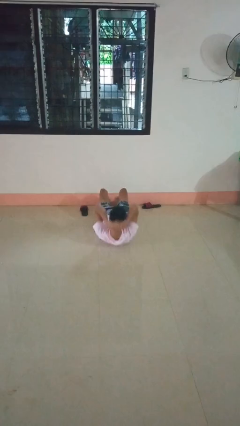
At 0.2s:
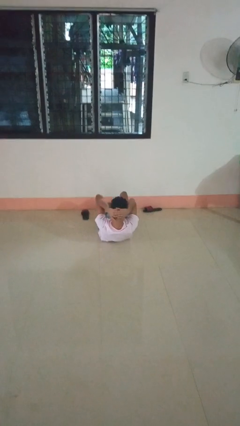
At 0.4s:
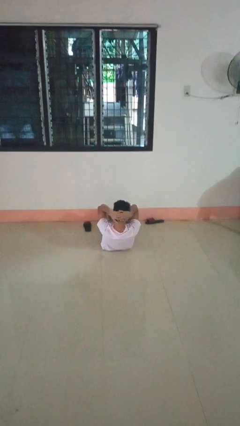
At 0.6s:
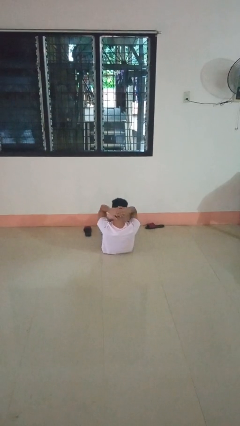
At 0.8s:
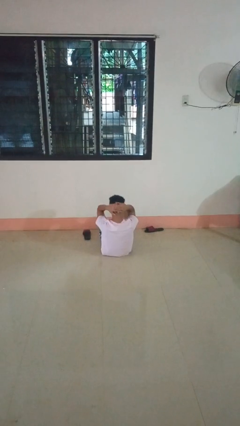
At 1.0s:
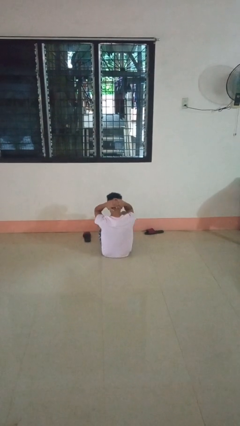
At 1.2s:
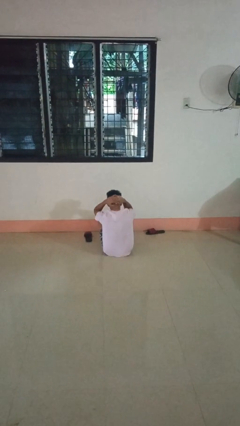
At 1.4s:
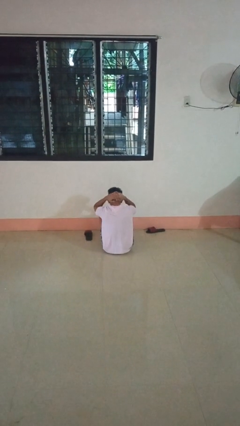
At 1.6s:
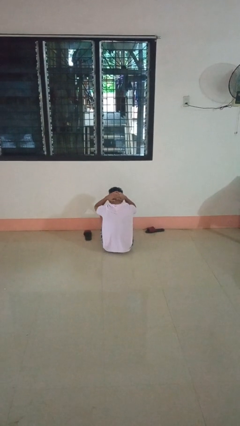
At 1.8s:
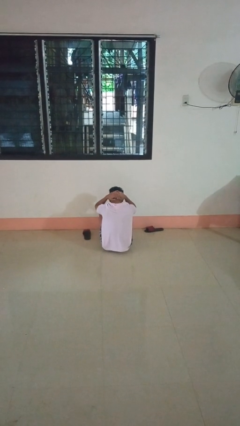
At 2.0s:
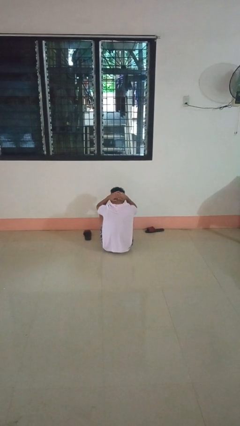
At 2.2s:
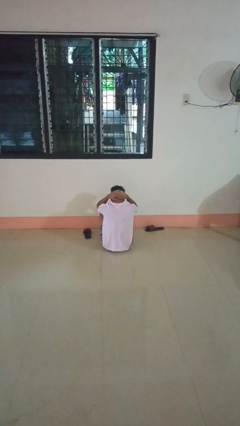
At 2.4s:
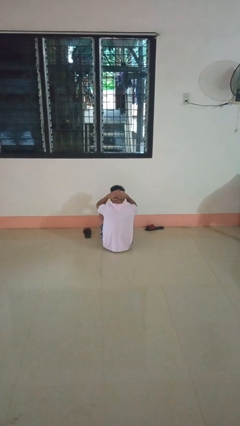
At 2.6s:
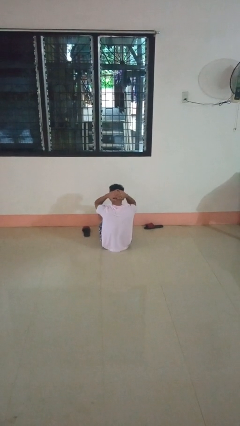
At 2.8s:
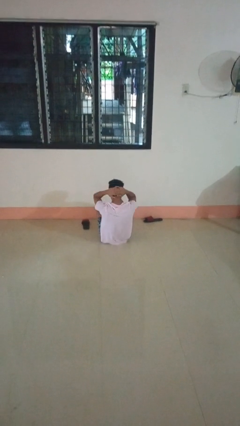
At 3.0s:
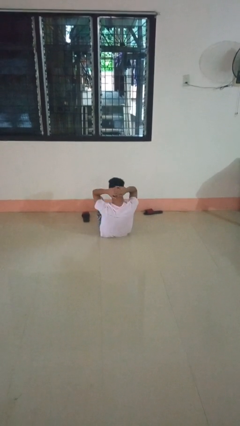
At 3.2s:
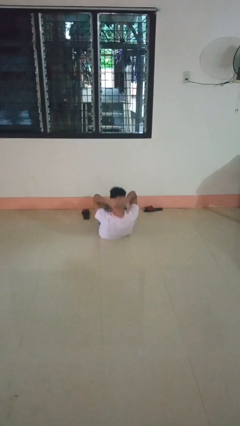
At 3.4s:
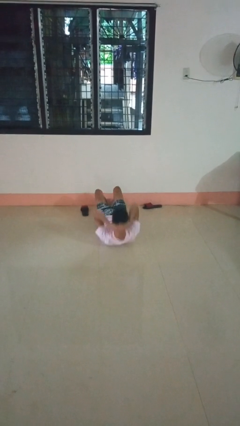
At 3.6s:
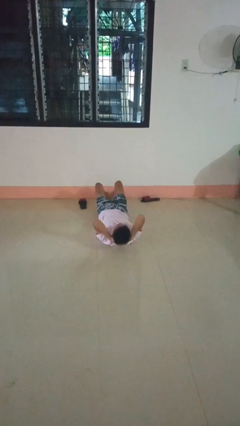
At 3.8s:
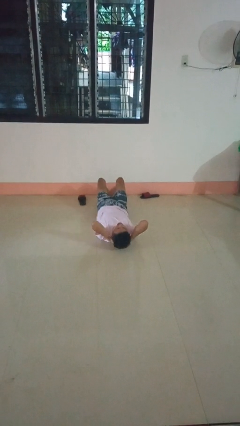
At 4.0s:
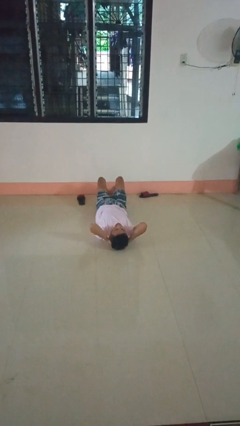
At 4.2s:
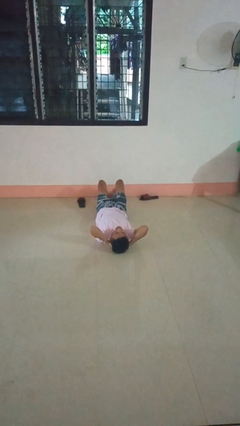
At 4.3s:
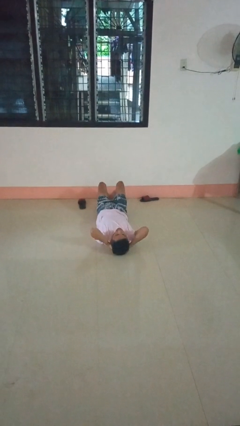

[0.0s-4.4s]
person exercises with situp

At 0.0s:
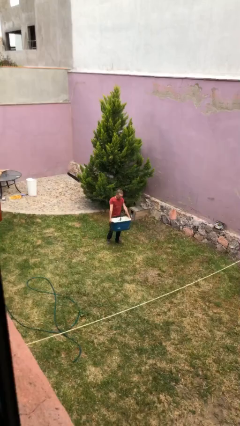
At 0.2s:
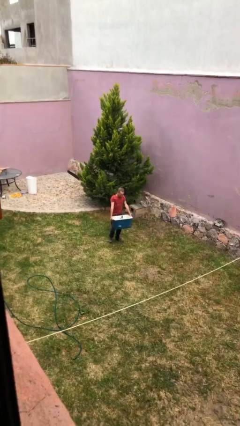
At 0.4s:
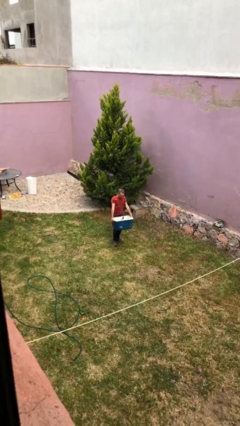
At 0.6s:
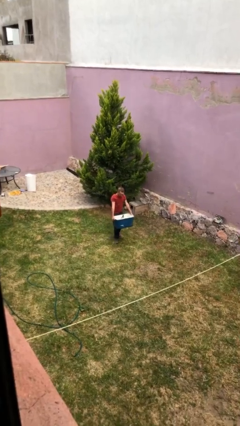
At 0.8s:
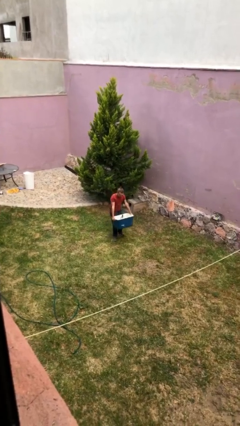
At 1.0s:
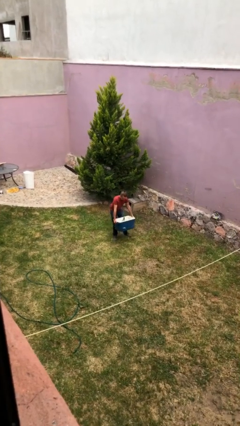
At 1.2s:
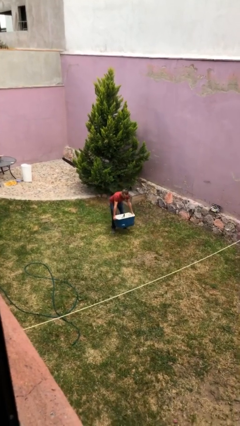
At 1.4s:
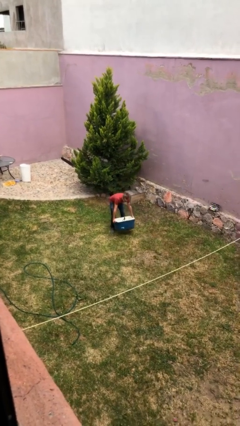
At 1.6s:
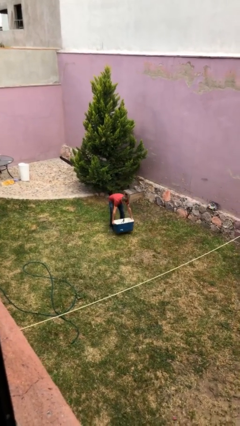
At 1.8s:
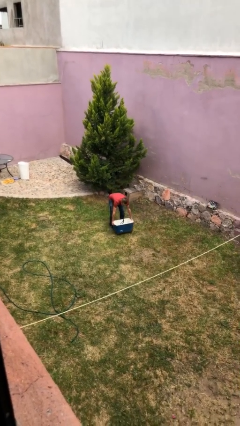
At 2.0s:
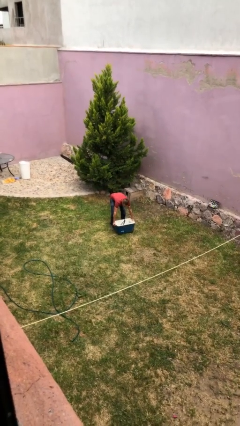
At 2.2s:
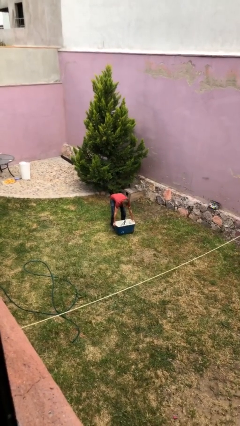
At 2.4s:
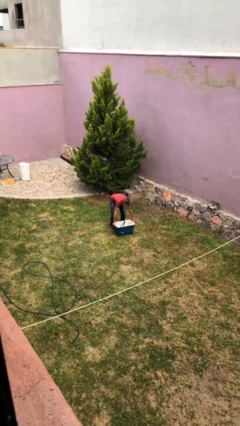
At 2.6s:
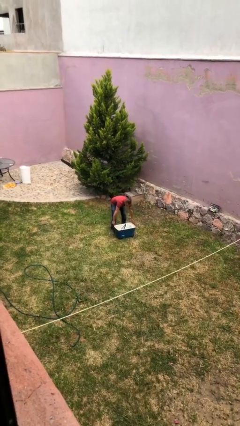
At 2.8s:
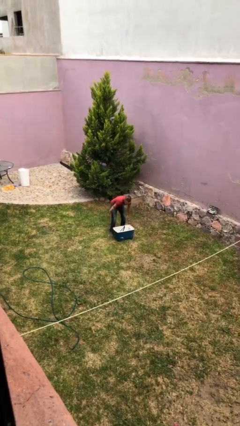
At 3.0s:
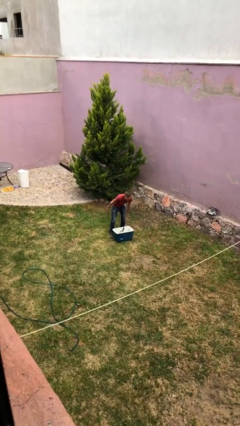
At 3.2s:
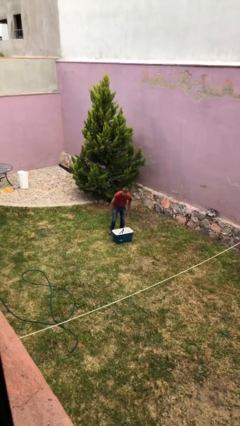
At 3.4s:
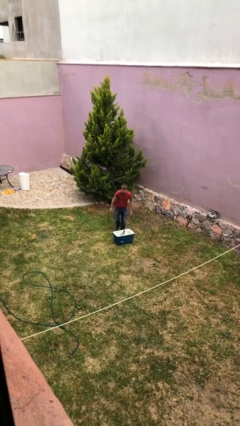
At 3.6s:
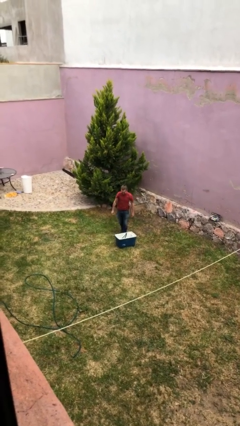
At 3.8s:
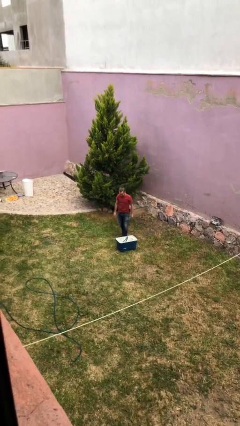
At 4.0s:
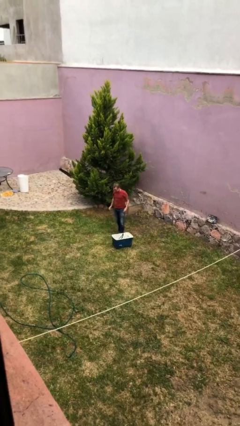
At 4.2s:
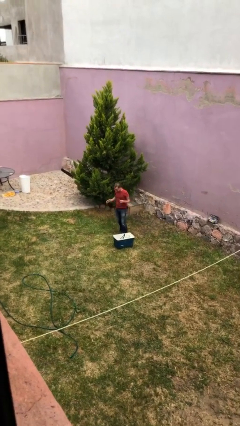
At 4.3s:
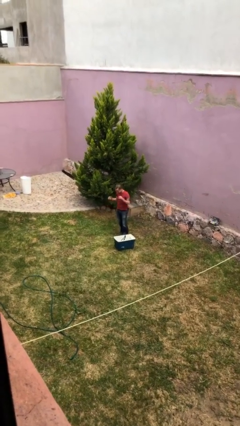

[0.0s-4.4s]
person puts down object on floor

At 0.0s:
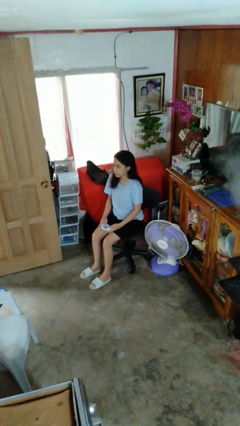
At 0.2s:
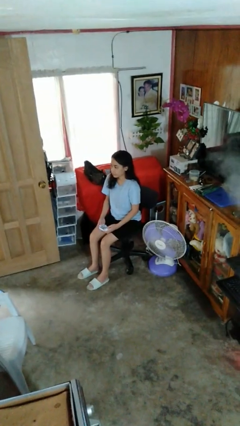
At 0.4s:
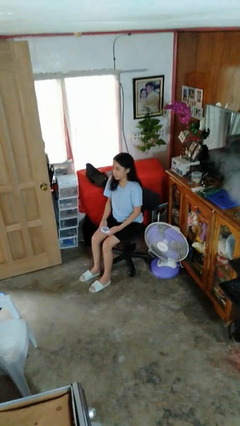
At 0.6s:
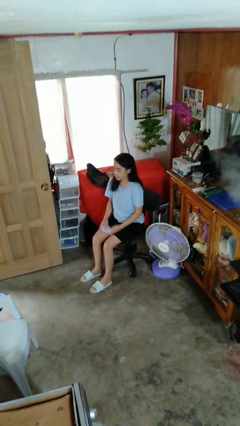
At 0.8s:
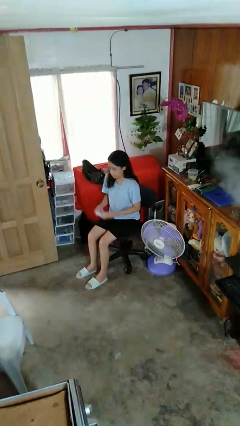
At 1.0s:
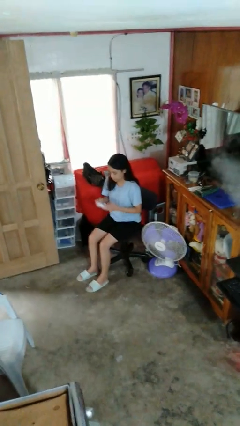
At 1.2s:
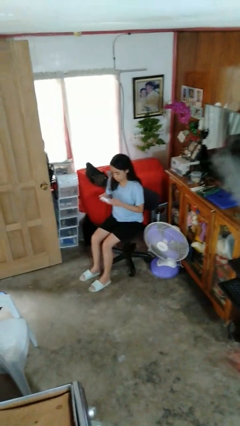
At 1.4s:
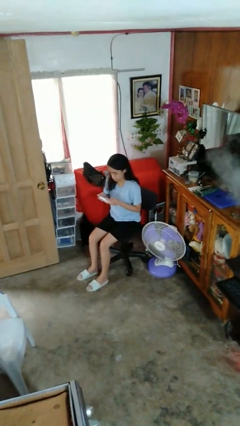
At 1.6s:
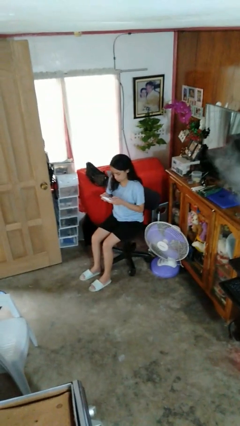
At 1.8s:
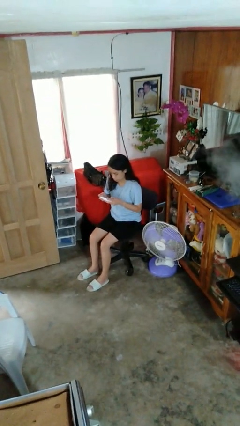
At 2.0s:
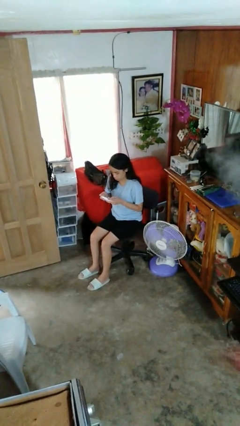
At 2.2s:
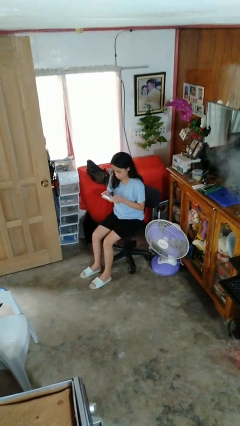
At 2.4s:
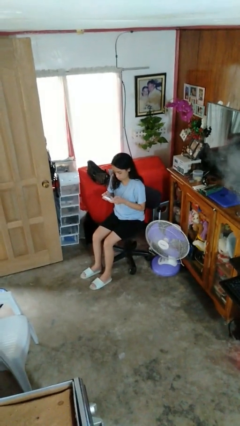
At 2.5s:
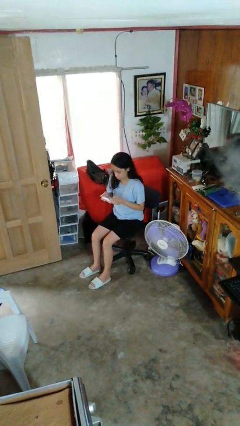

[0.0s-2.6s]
person interacts with handheld game

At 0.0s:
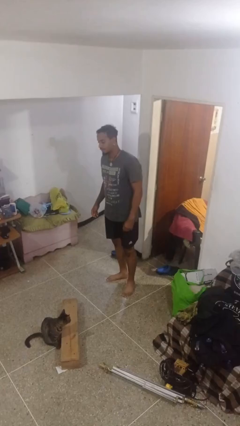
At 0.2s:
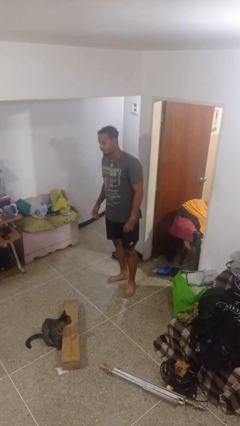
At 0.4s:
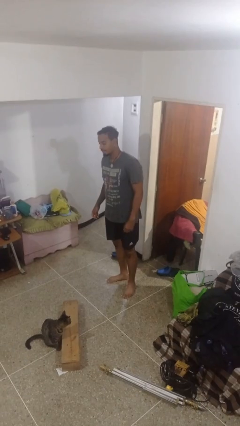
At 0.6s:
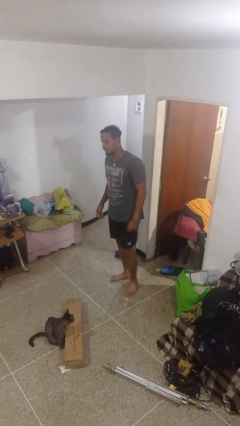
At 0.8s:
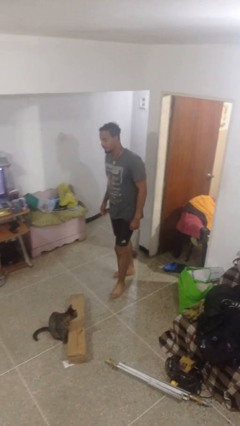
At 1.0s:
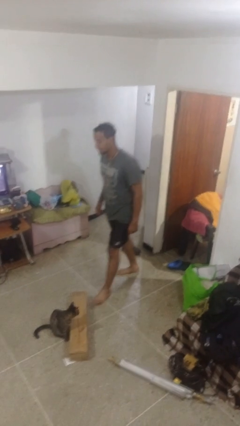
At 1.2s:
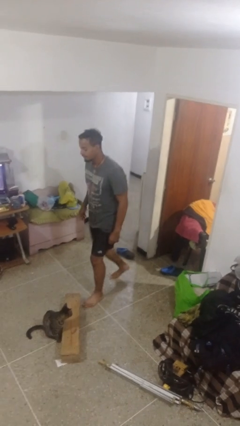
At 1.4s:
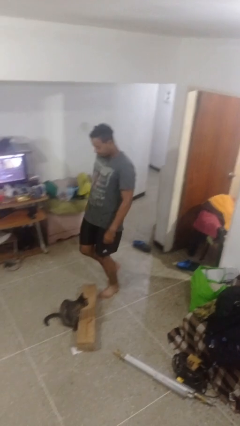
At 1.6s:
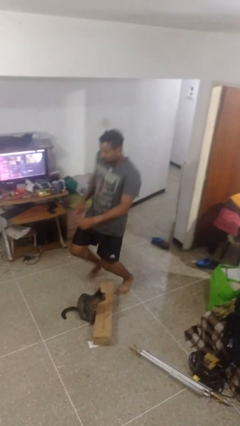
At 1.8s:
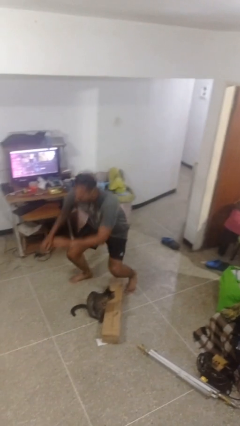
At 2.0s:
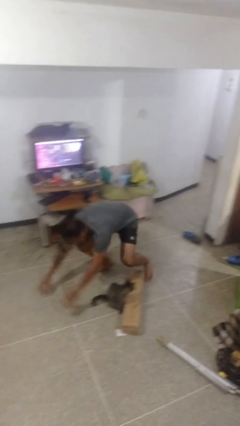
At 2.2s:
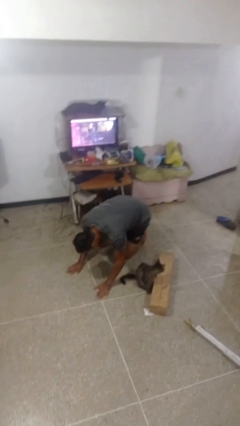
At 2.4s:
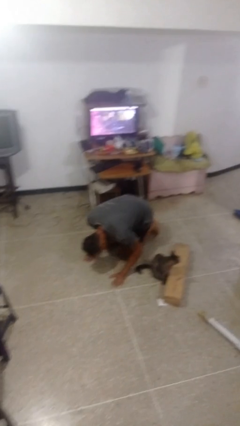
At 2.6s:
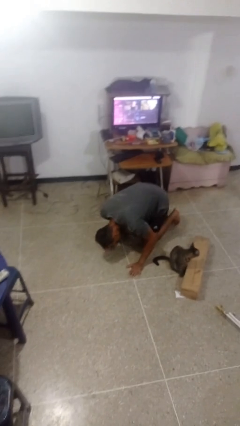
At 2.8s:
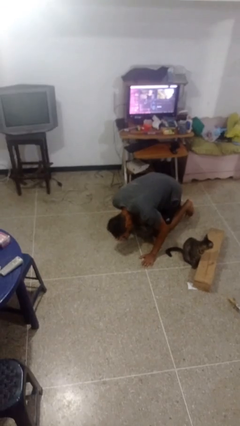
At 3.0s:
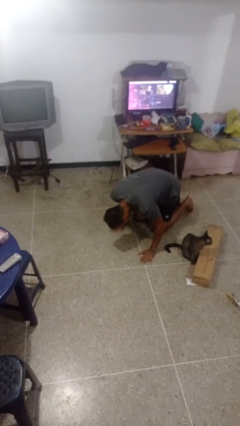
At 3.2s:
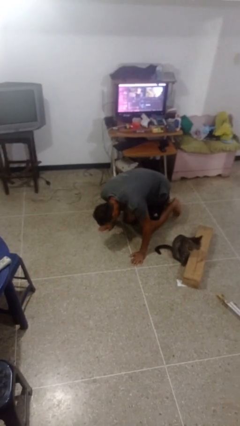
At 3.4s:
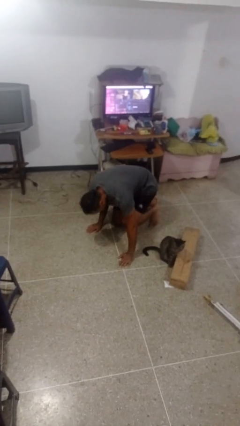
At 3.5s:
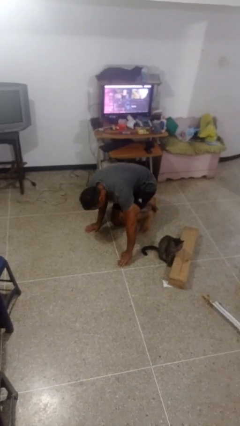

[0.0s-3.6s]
person trips on object on floor

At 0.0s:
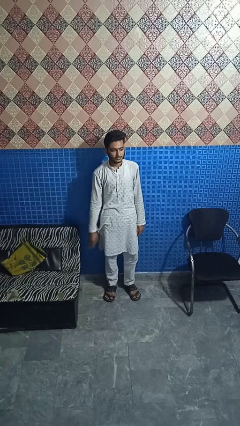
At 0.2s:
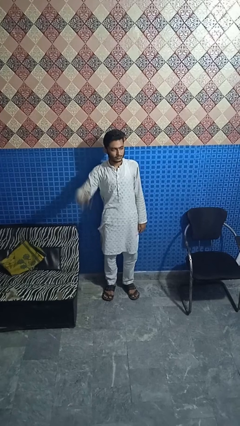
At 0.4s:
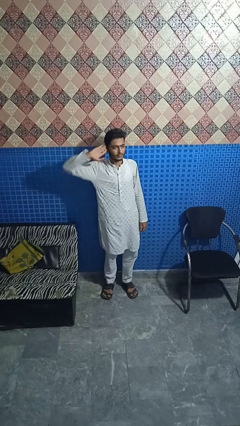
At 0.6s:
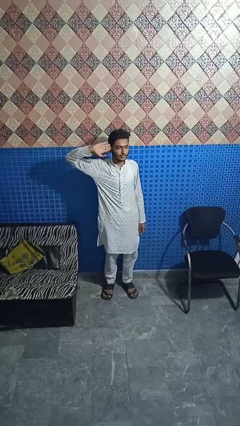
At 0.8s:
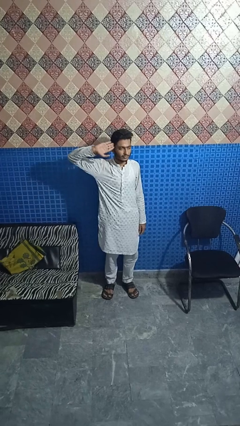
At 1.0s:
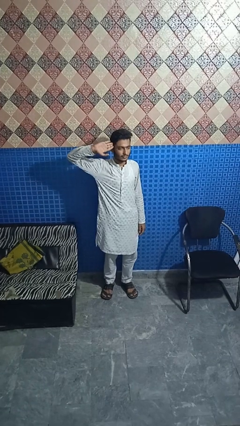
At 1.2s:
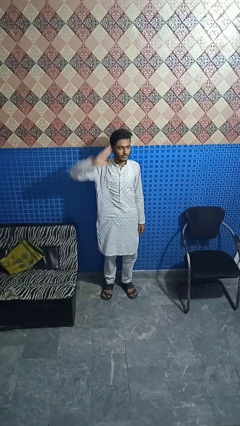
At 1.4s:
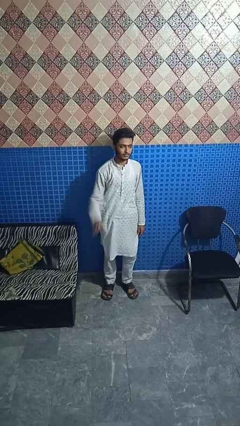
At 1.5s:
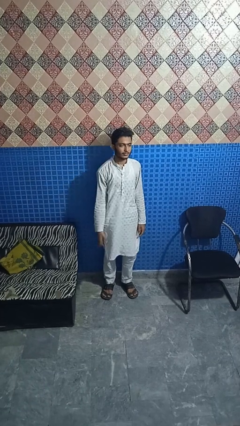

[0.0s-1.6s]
person salutes

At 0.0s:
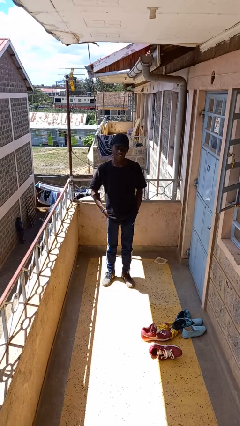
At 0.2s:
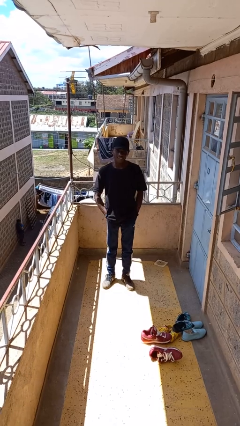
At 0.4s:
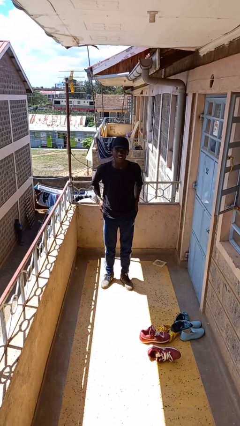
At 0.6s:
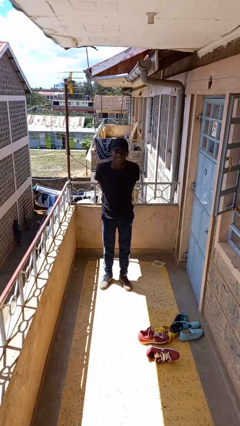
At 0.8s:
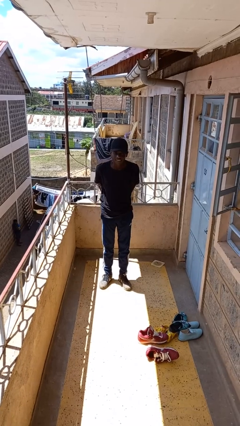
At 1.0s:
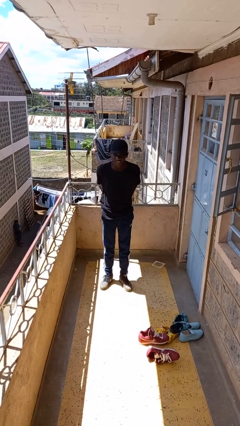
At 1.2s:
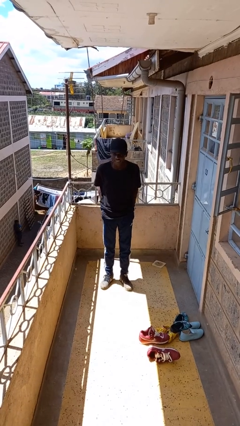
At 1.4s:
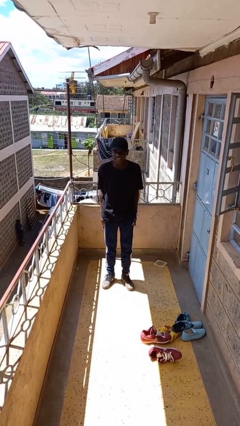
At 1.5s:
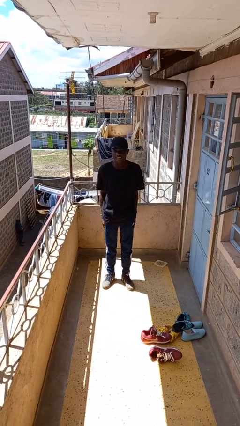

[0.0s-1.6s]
person puts hands in back pockets
